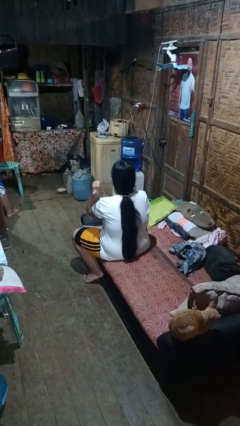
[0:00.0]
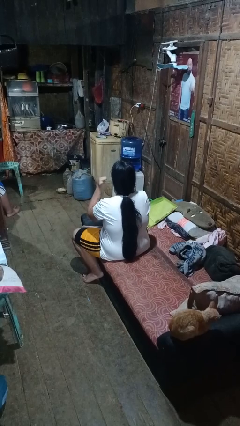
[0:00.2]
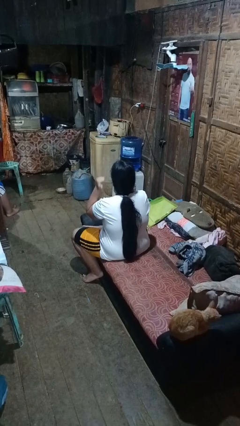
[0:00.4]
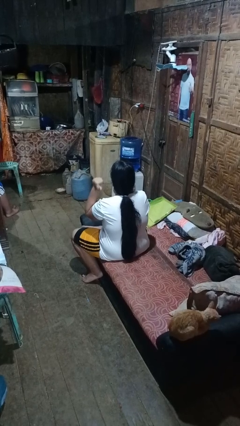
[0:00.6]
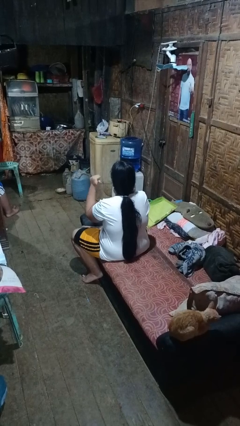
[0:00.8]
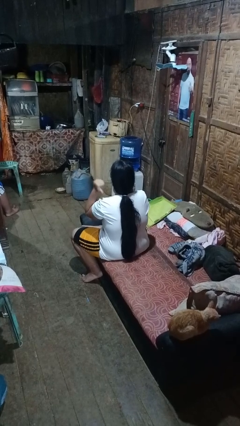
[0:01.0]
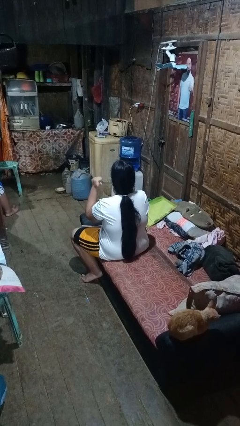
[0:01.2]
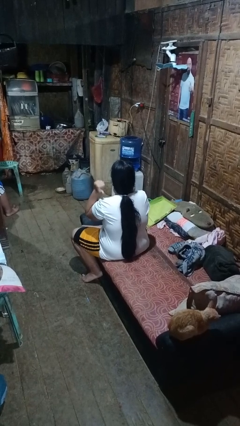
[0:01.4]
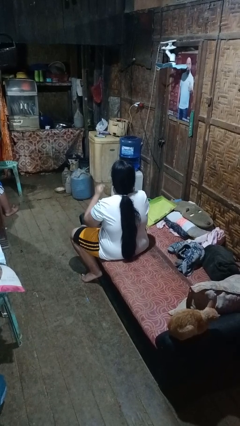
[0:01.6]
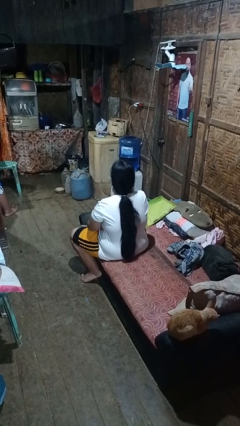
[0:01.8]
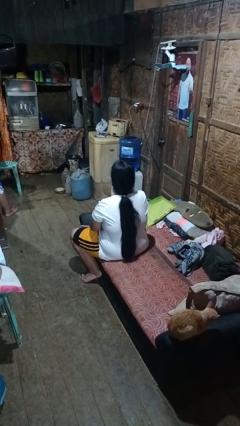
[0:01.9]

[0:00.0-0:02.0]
person gestures behind me

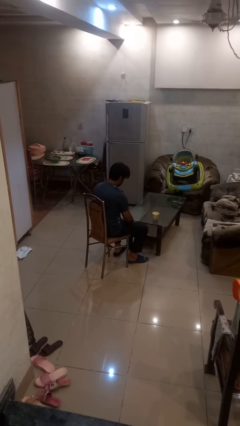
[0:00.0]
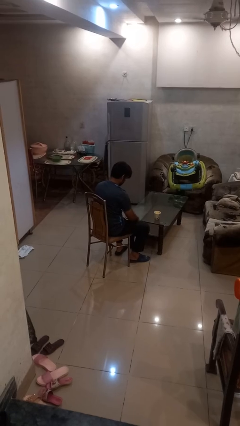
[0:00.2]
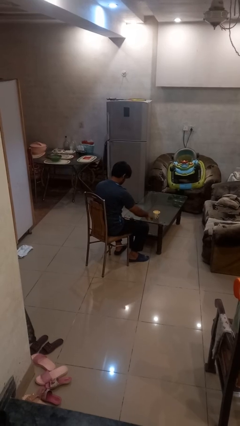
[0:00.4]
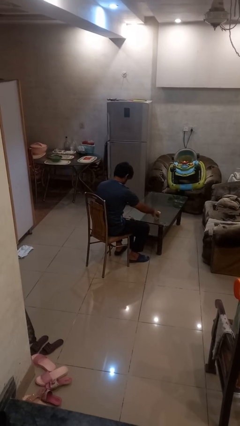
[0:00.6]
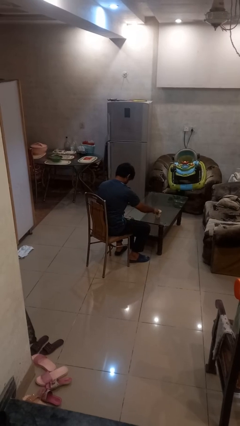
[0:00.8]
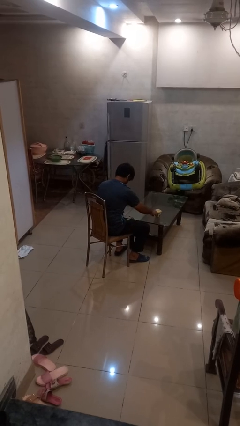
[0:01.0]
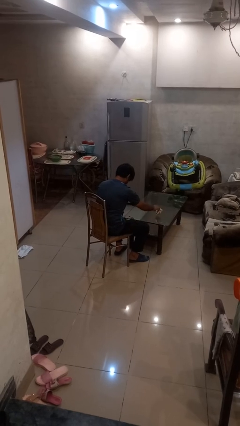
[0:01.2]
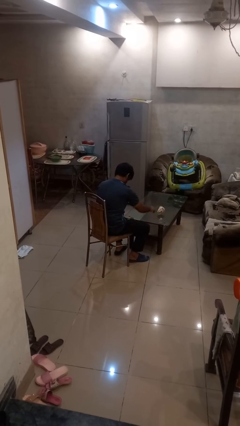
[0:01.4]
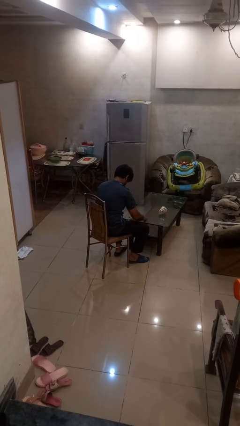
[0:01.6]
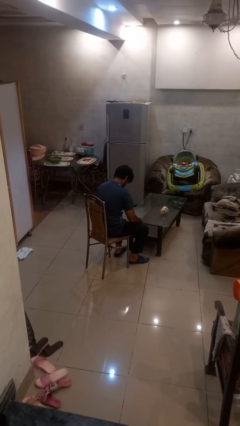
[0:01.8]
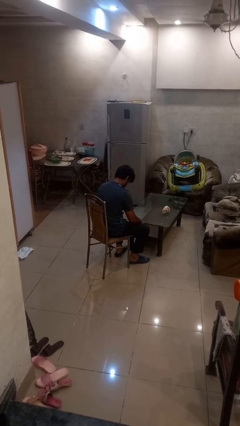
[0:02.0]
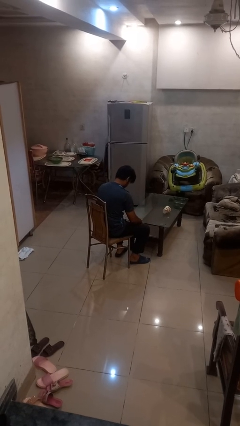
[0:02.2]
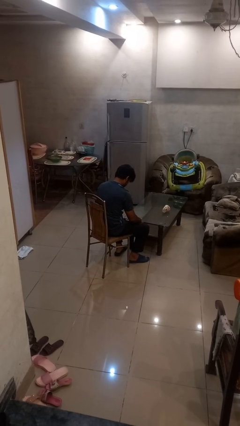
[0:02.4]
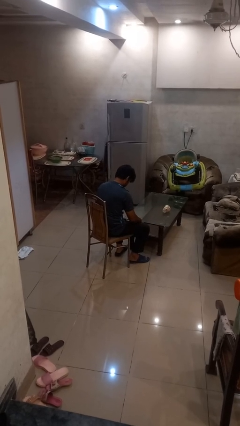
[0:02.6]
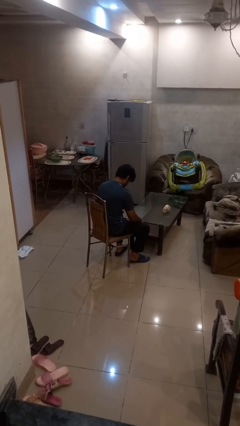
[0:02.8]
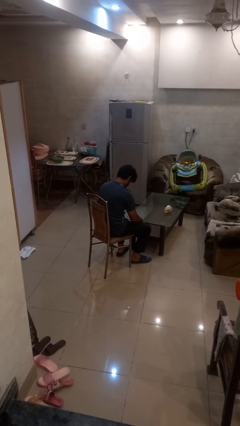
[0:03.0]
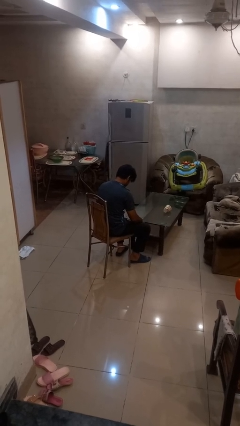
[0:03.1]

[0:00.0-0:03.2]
person knocks over glass

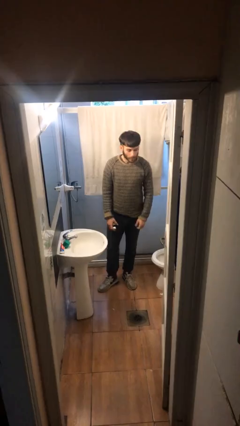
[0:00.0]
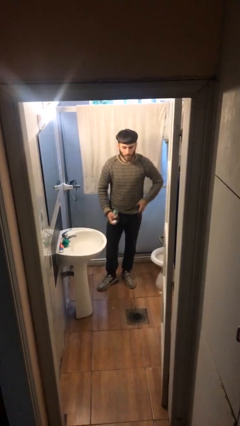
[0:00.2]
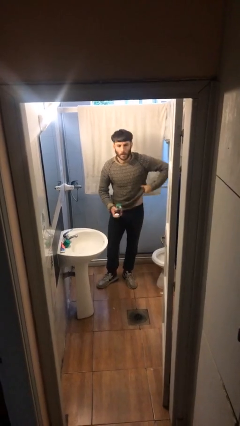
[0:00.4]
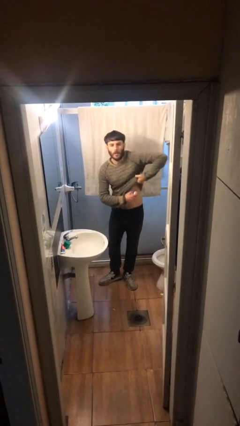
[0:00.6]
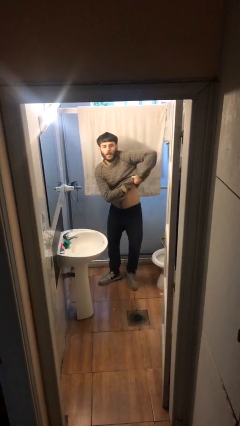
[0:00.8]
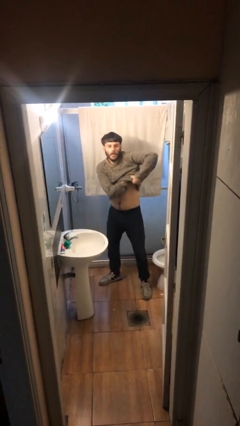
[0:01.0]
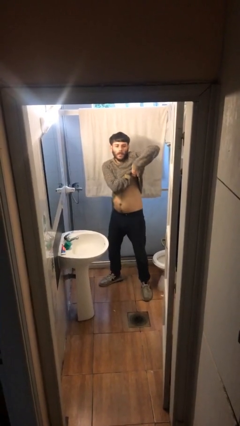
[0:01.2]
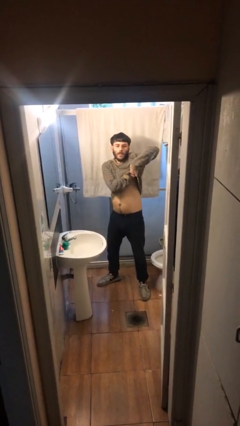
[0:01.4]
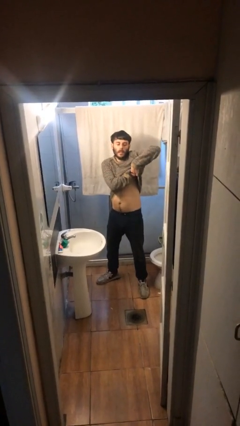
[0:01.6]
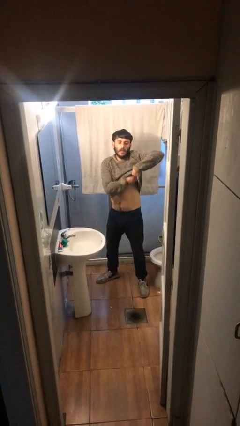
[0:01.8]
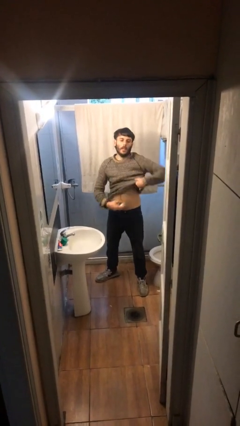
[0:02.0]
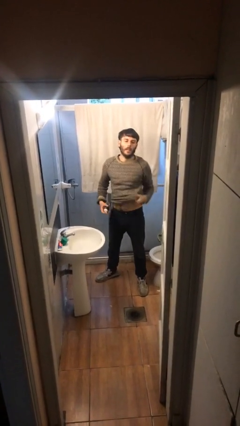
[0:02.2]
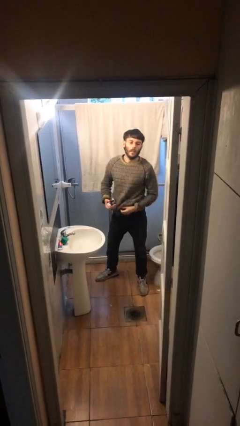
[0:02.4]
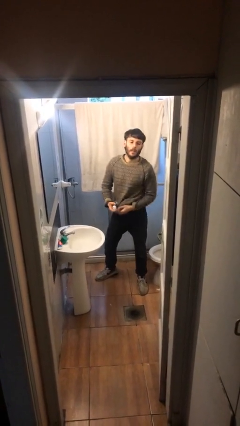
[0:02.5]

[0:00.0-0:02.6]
person applies deodorant

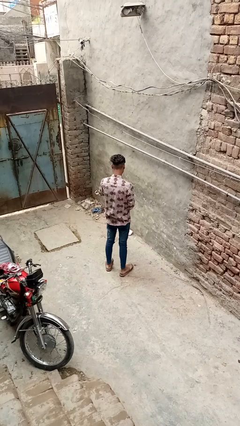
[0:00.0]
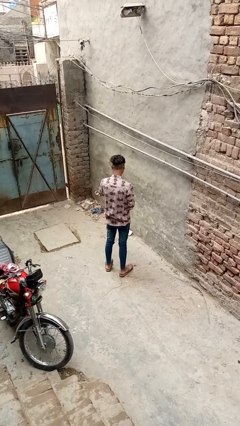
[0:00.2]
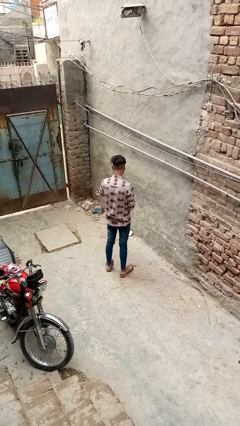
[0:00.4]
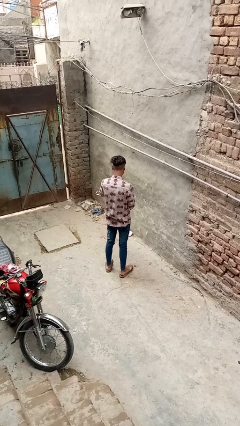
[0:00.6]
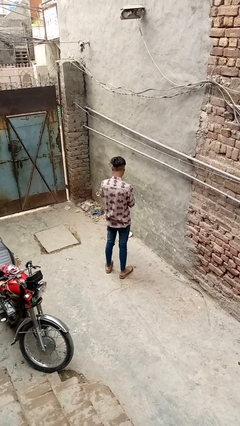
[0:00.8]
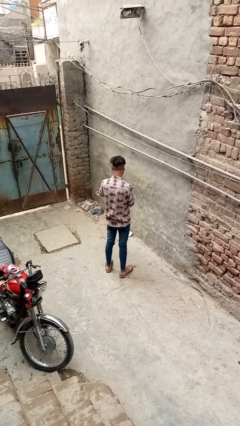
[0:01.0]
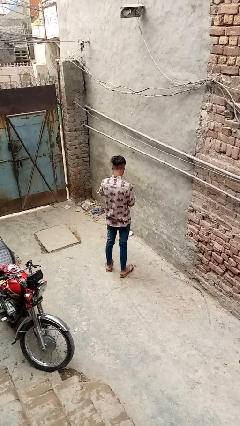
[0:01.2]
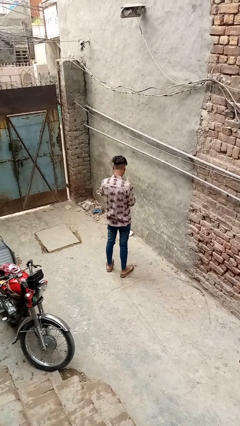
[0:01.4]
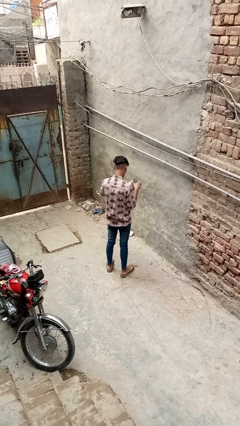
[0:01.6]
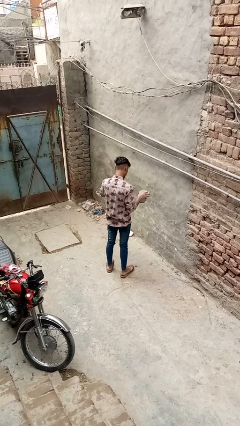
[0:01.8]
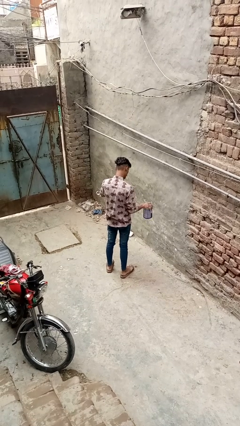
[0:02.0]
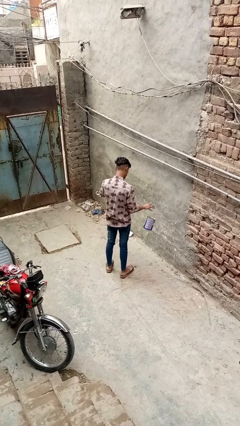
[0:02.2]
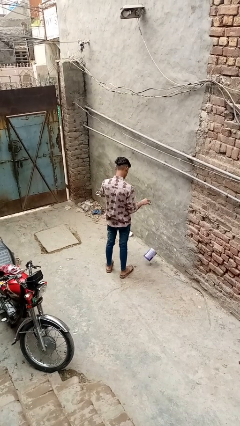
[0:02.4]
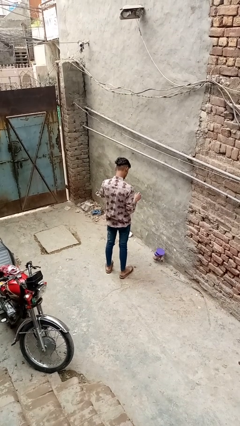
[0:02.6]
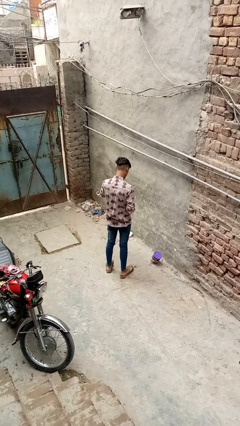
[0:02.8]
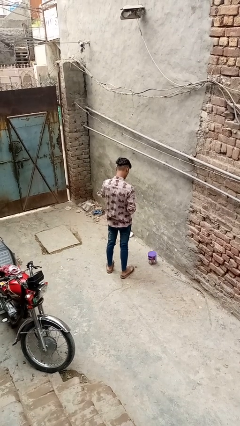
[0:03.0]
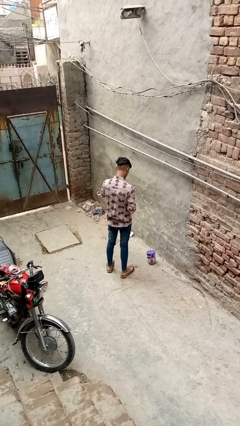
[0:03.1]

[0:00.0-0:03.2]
person discards trash

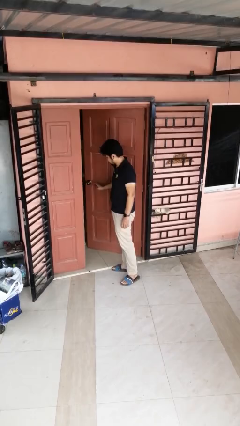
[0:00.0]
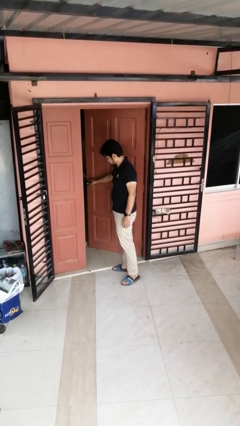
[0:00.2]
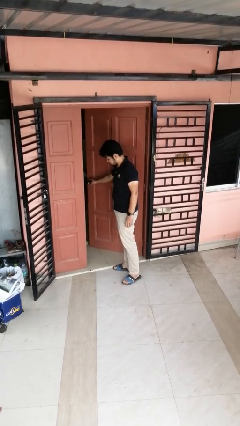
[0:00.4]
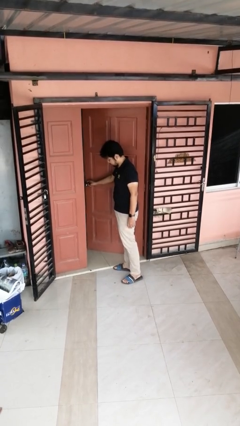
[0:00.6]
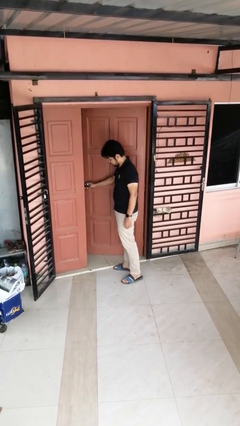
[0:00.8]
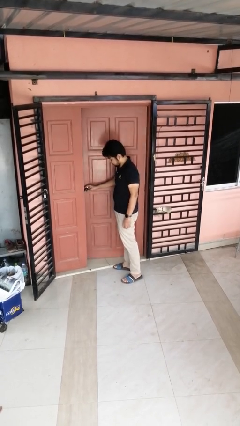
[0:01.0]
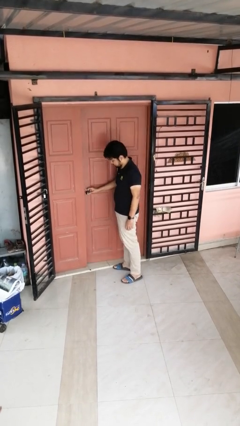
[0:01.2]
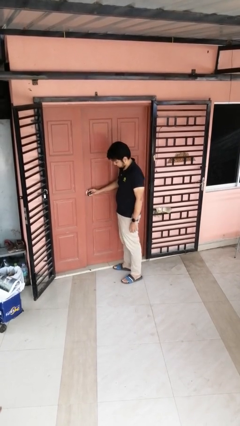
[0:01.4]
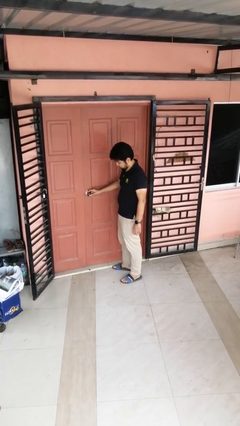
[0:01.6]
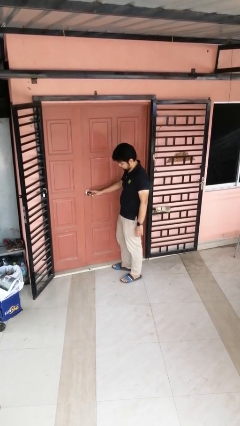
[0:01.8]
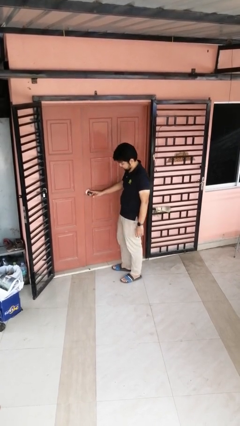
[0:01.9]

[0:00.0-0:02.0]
person closes door with foot

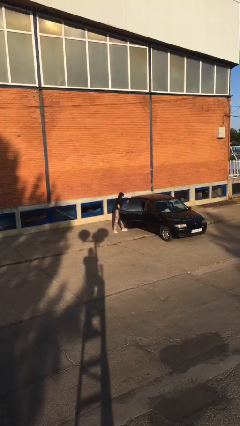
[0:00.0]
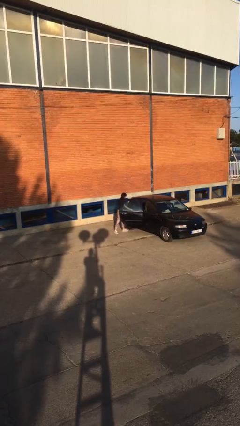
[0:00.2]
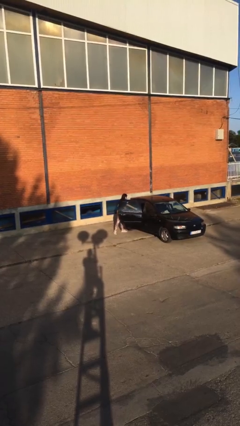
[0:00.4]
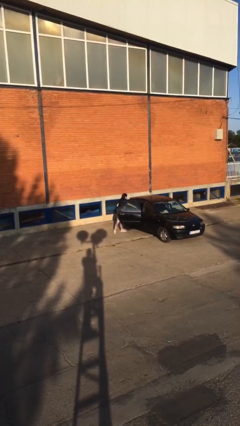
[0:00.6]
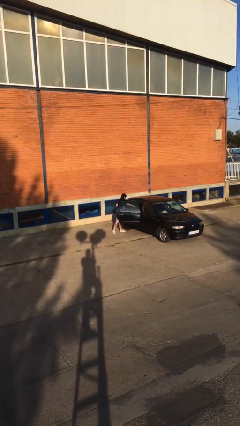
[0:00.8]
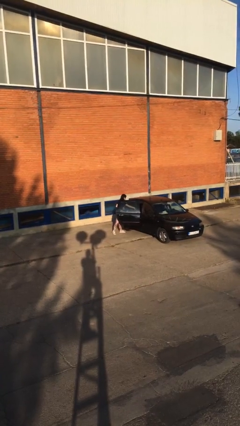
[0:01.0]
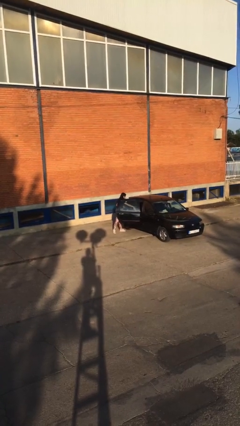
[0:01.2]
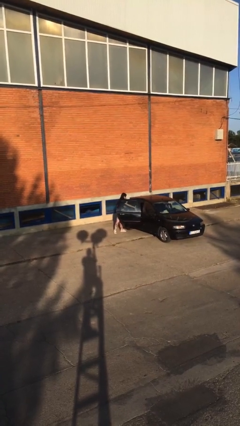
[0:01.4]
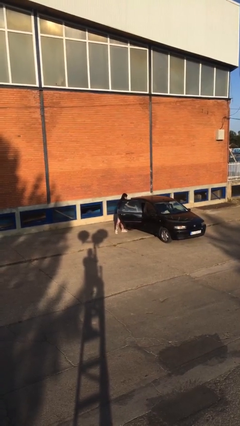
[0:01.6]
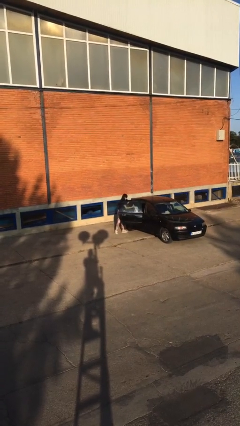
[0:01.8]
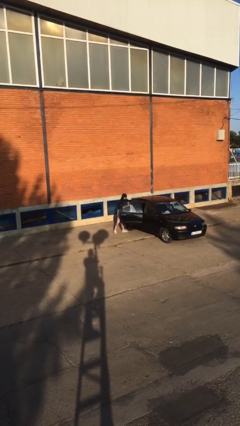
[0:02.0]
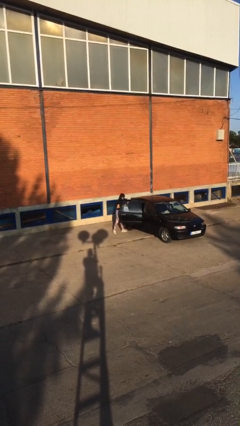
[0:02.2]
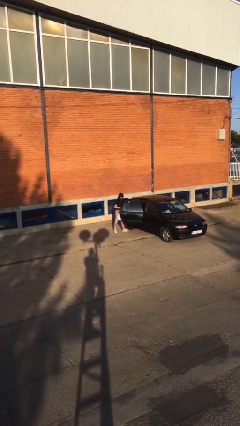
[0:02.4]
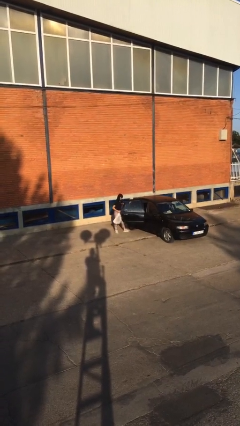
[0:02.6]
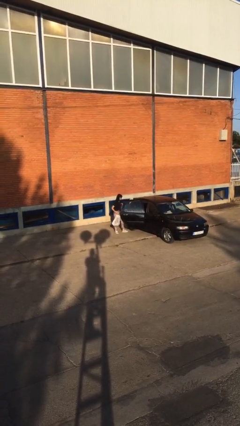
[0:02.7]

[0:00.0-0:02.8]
person unloads car

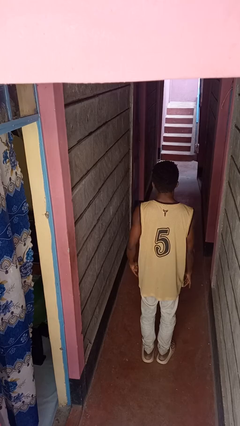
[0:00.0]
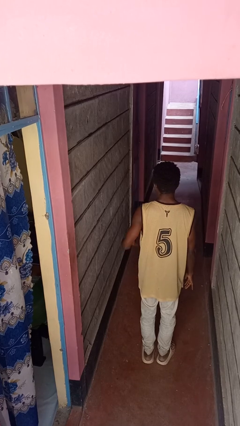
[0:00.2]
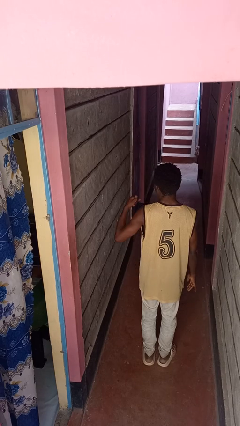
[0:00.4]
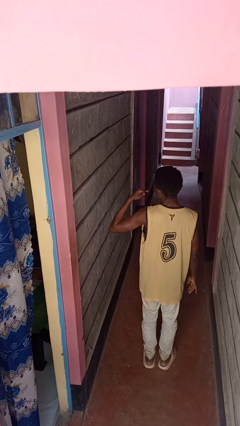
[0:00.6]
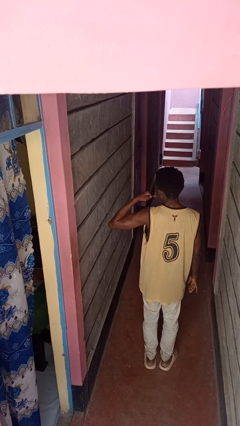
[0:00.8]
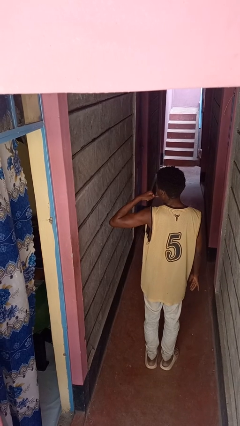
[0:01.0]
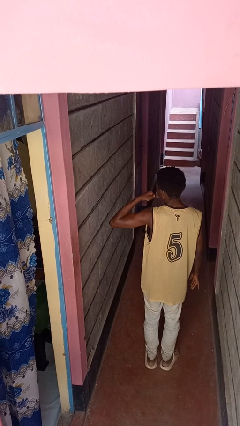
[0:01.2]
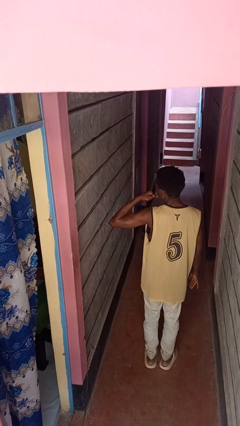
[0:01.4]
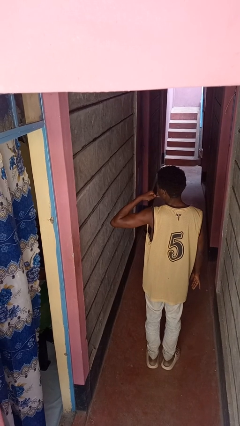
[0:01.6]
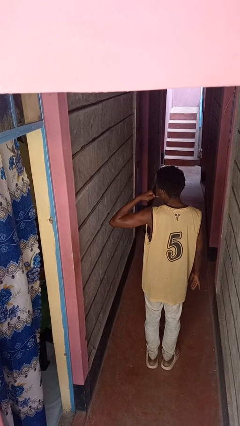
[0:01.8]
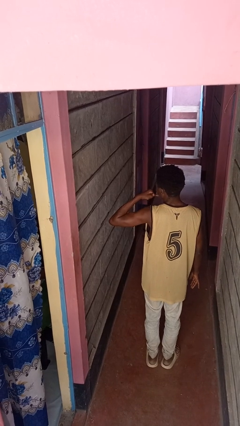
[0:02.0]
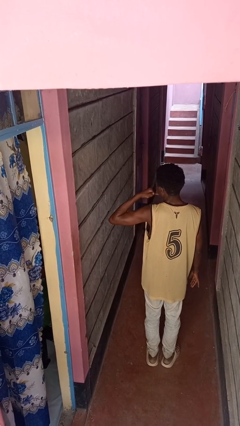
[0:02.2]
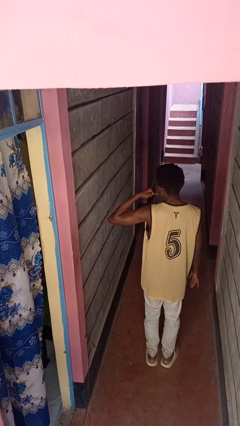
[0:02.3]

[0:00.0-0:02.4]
person gestures call me
